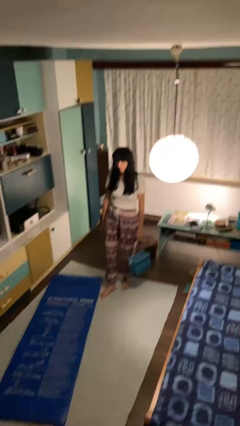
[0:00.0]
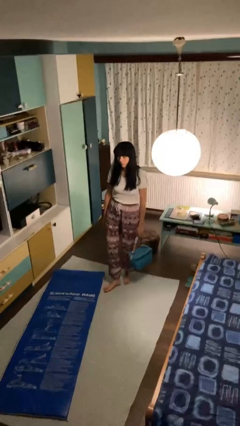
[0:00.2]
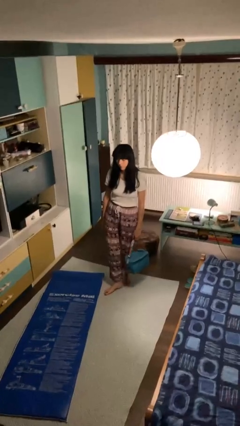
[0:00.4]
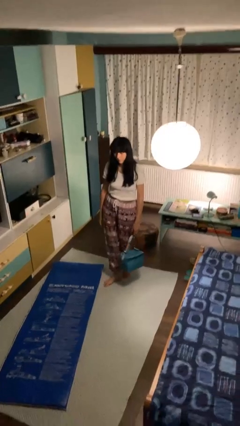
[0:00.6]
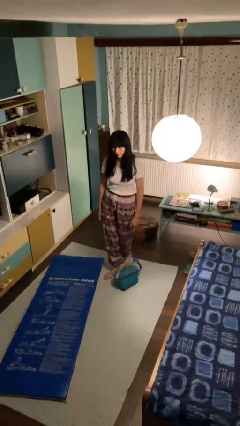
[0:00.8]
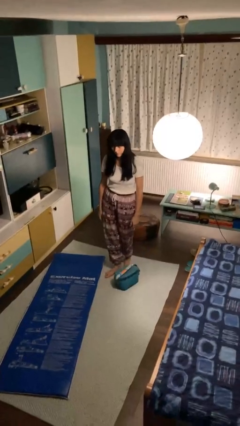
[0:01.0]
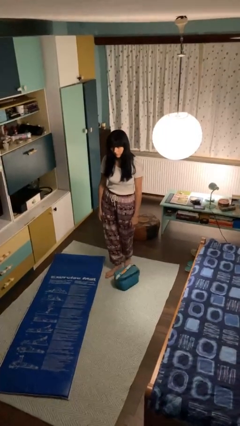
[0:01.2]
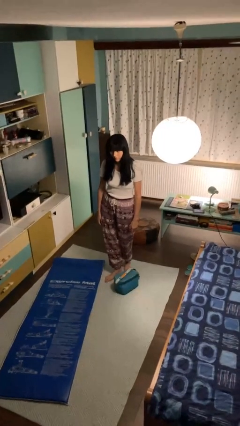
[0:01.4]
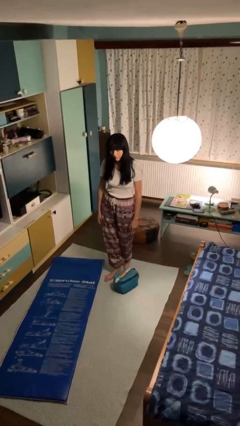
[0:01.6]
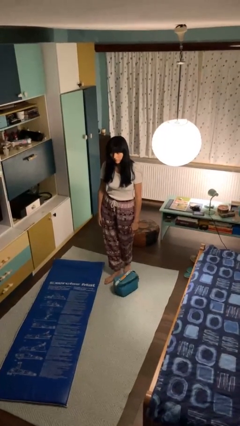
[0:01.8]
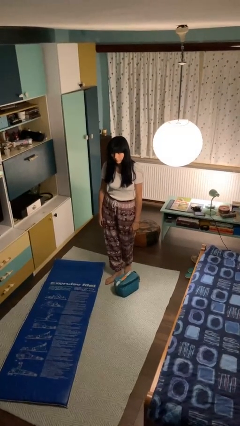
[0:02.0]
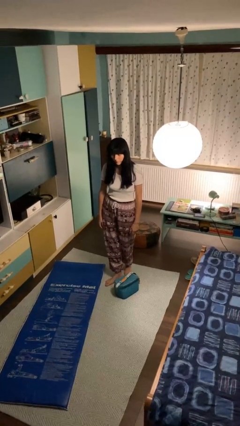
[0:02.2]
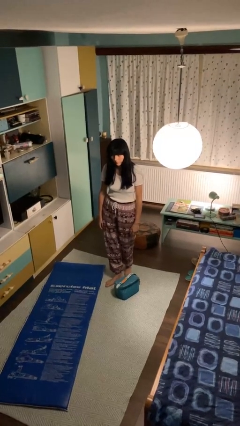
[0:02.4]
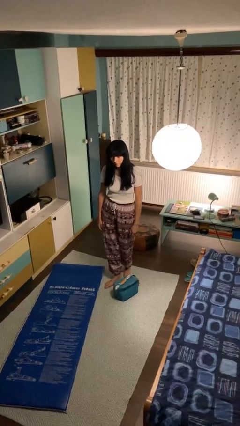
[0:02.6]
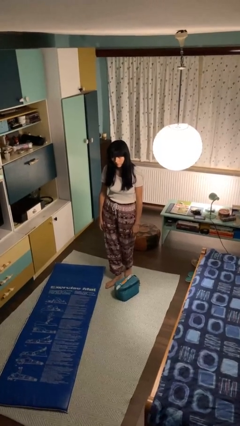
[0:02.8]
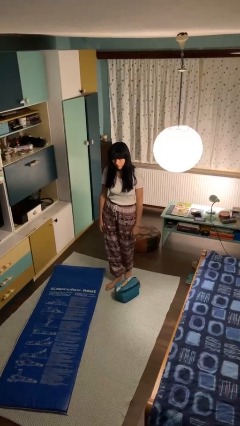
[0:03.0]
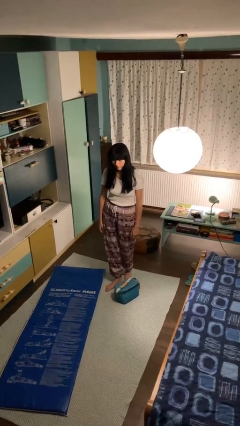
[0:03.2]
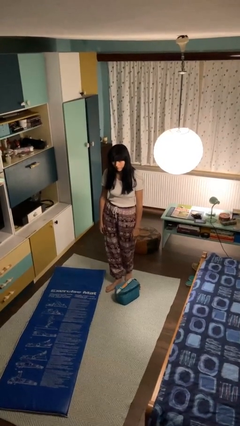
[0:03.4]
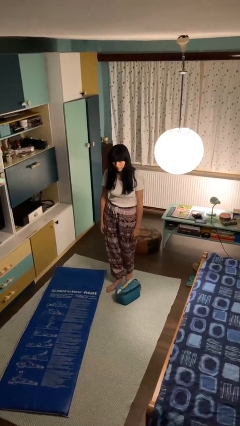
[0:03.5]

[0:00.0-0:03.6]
person drops object

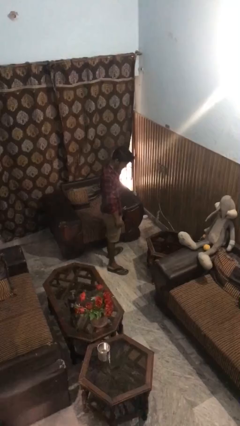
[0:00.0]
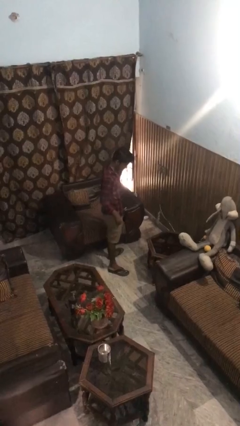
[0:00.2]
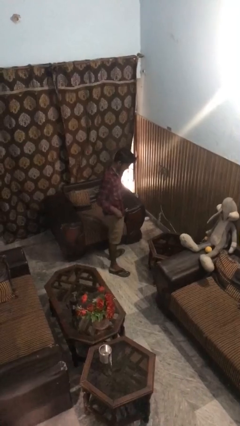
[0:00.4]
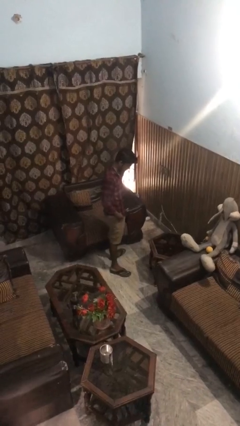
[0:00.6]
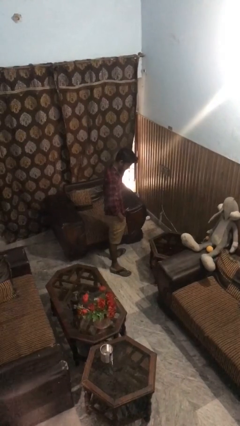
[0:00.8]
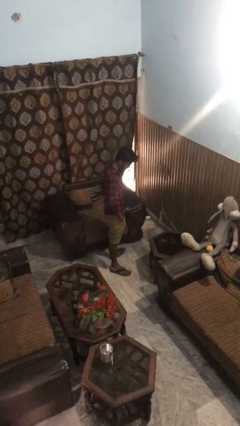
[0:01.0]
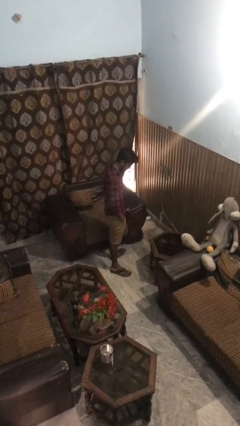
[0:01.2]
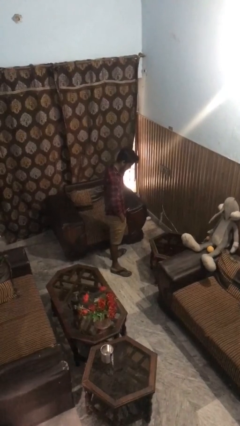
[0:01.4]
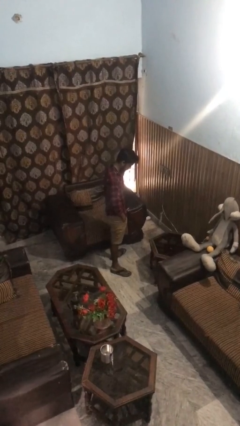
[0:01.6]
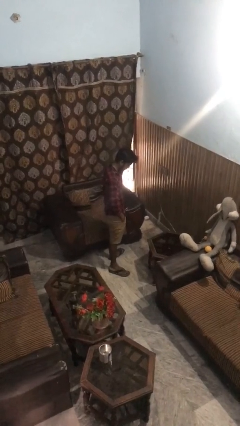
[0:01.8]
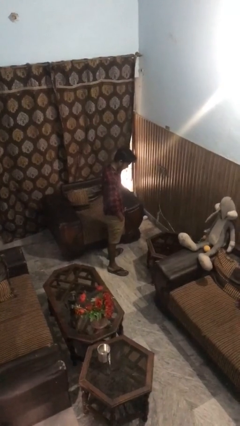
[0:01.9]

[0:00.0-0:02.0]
person puts hands in back pockets

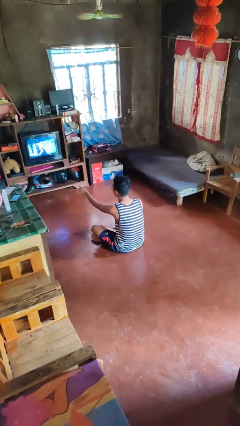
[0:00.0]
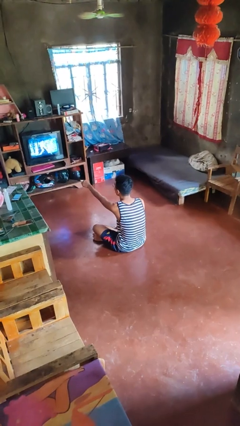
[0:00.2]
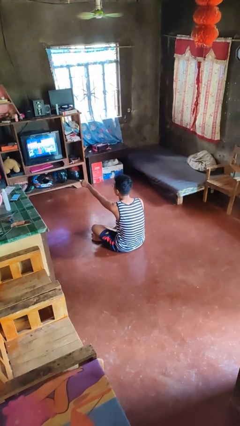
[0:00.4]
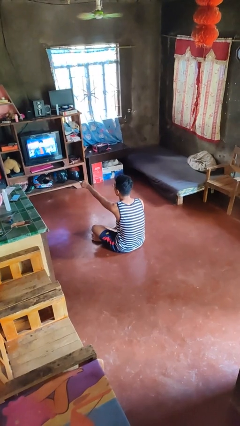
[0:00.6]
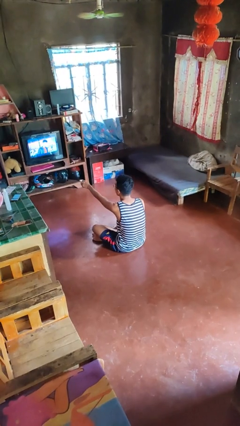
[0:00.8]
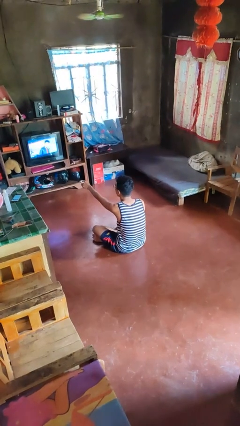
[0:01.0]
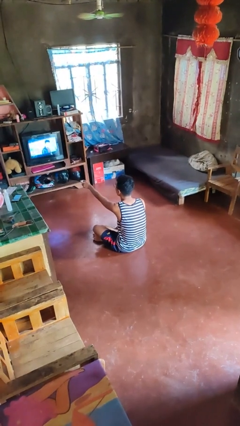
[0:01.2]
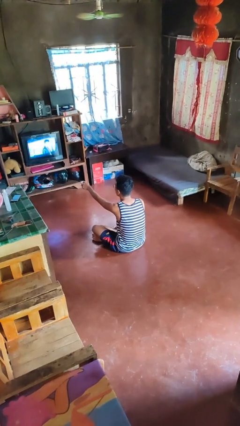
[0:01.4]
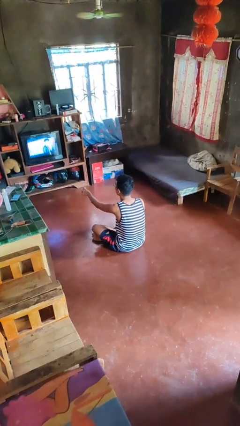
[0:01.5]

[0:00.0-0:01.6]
person uses television remote

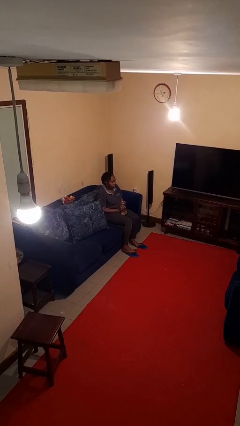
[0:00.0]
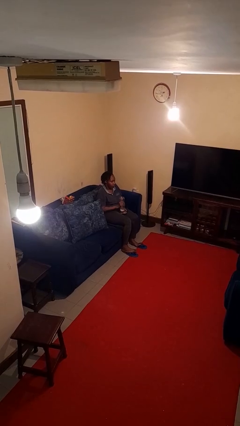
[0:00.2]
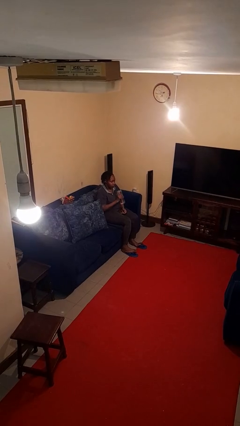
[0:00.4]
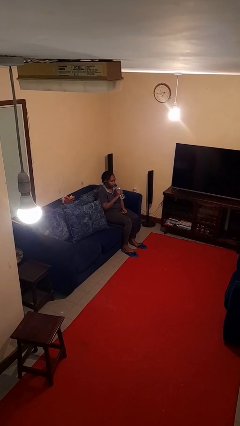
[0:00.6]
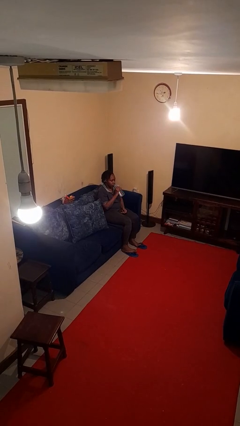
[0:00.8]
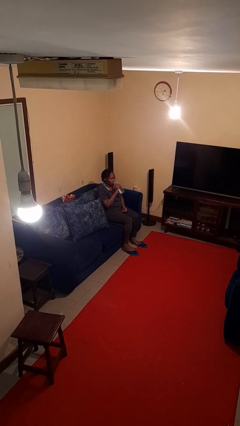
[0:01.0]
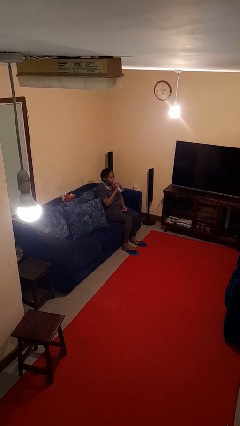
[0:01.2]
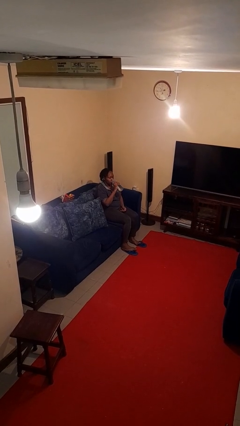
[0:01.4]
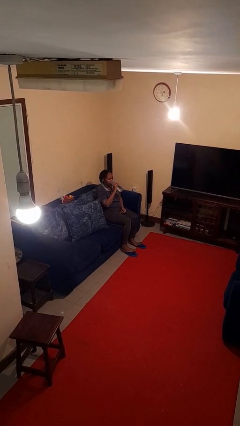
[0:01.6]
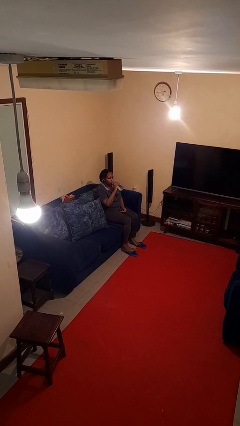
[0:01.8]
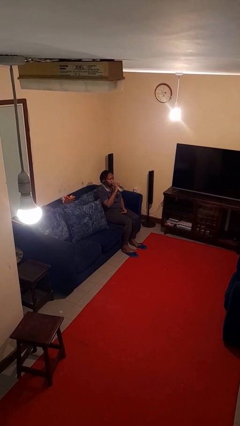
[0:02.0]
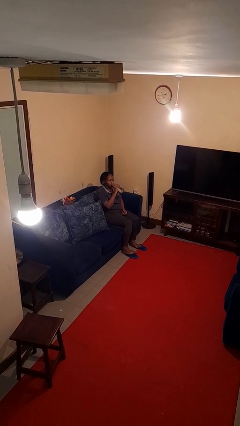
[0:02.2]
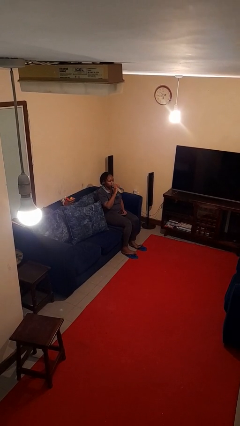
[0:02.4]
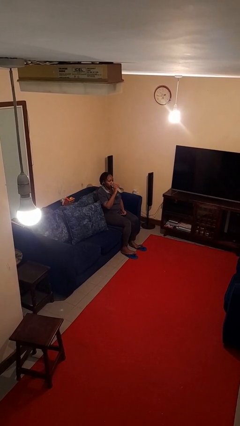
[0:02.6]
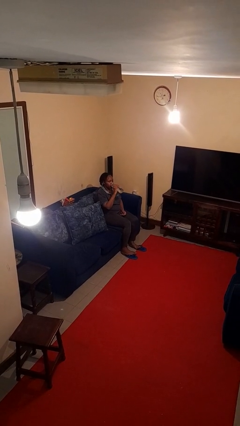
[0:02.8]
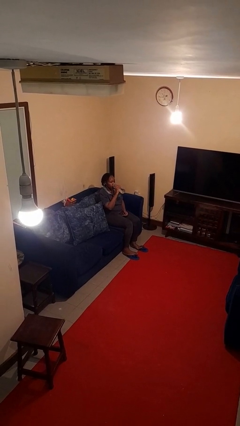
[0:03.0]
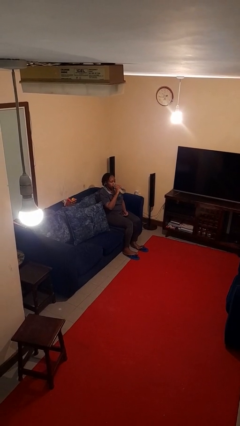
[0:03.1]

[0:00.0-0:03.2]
person drinks from bottle

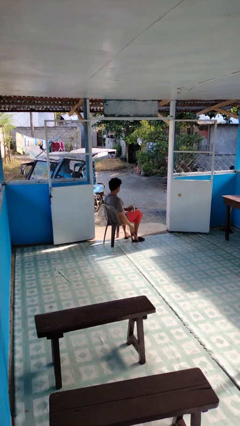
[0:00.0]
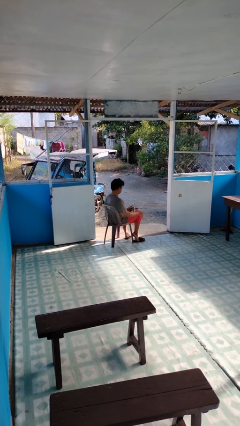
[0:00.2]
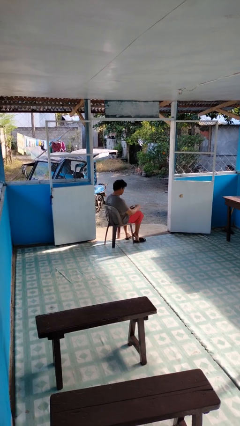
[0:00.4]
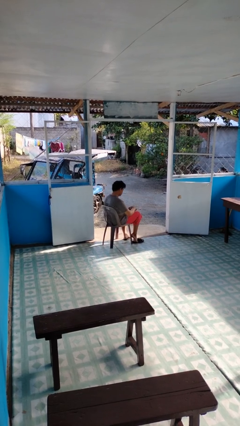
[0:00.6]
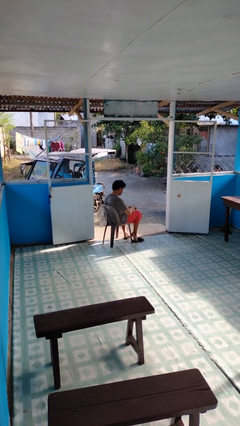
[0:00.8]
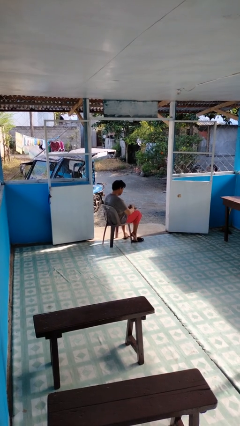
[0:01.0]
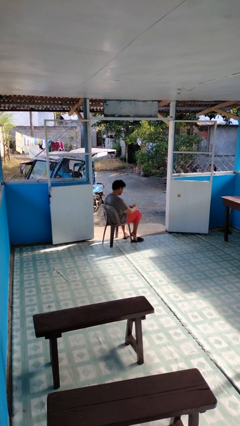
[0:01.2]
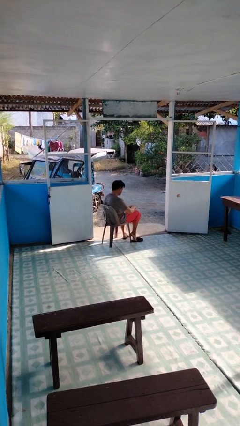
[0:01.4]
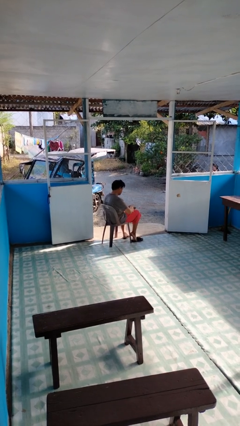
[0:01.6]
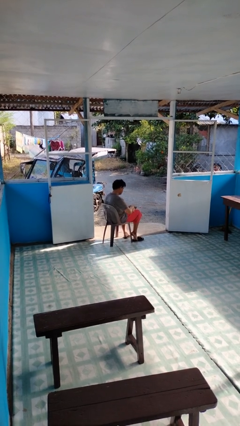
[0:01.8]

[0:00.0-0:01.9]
person pets cat

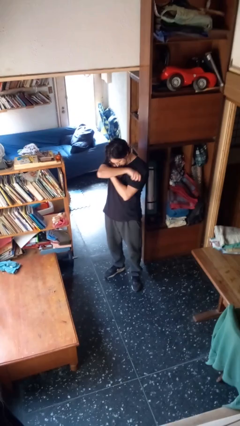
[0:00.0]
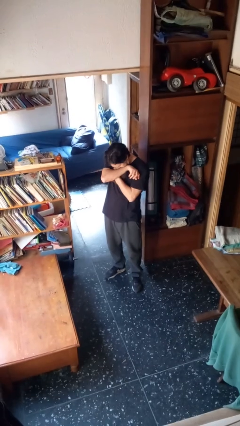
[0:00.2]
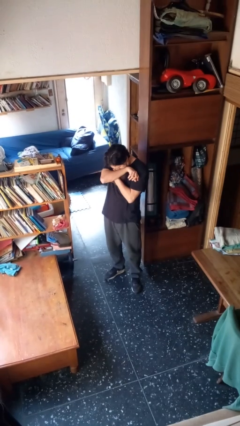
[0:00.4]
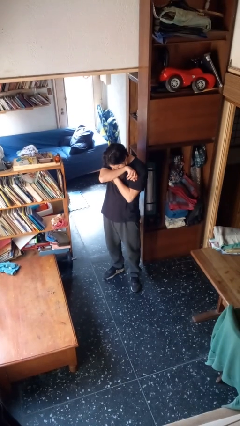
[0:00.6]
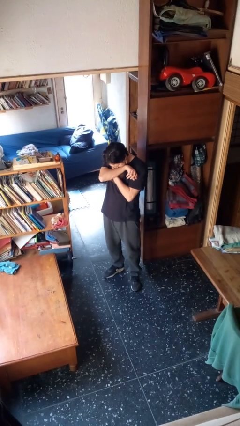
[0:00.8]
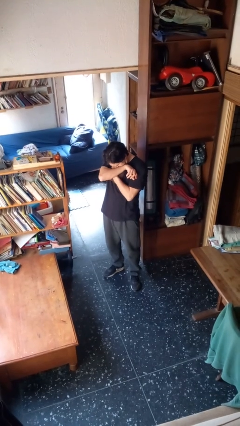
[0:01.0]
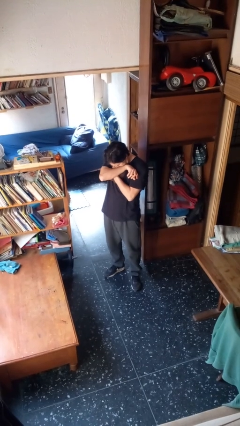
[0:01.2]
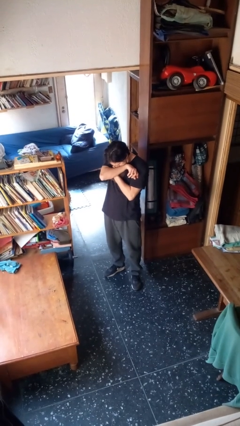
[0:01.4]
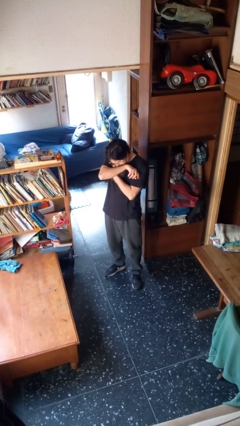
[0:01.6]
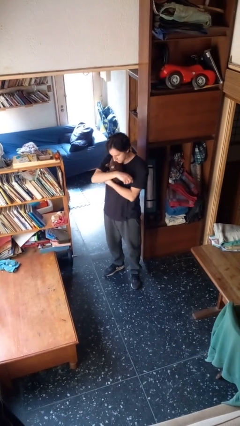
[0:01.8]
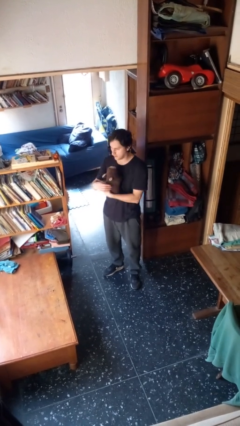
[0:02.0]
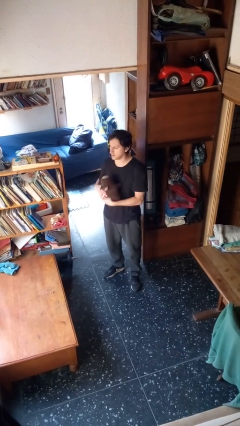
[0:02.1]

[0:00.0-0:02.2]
person hugs stuffed animal

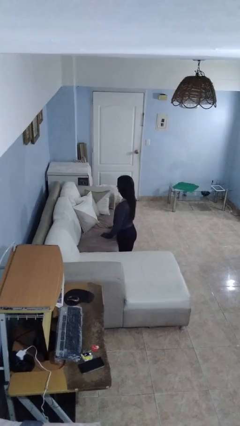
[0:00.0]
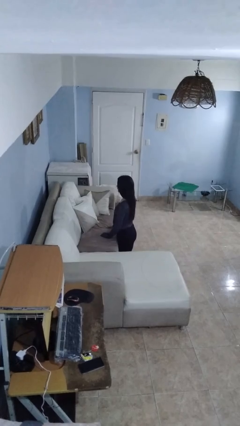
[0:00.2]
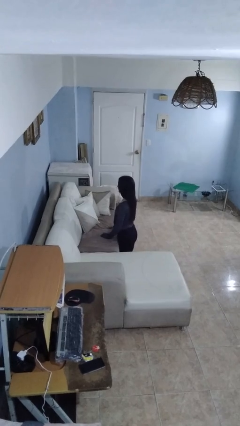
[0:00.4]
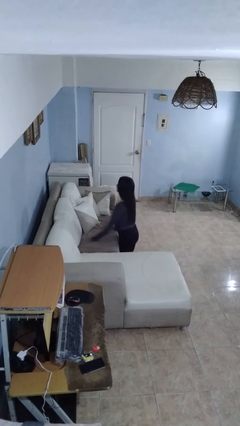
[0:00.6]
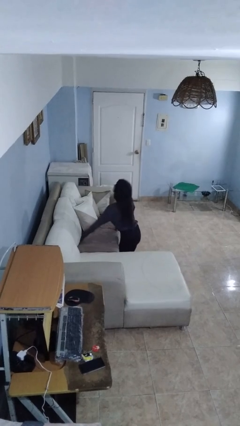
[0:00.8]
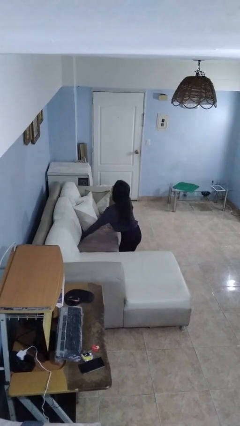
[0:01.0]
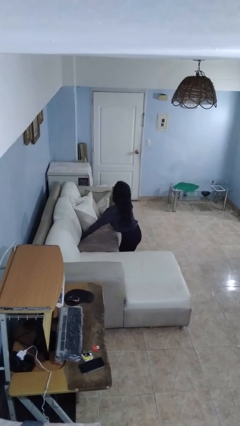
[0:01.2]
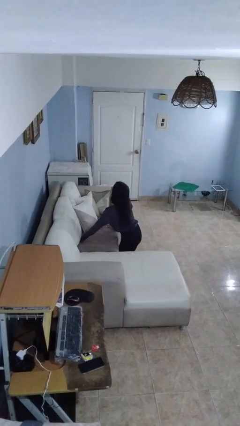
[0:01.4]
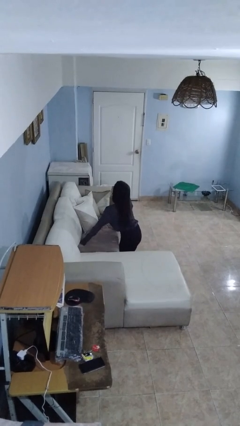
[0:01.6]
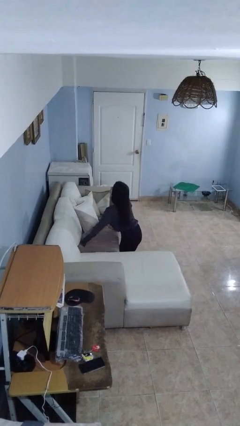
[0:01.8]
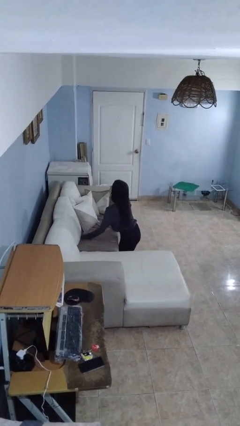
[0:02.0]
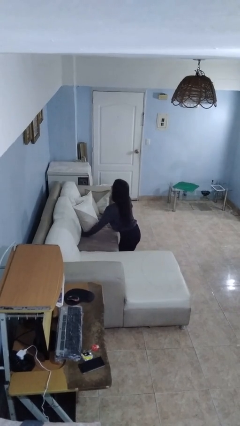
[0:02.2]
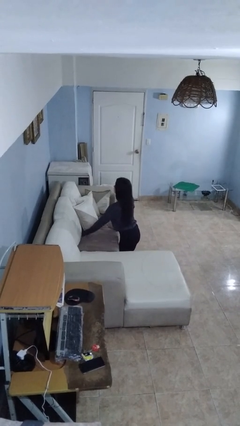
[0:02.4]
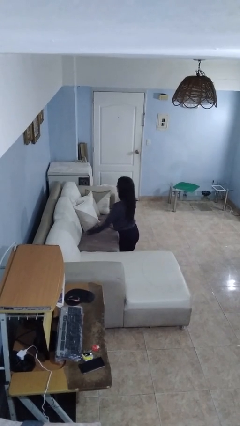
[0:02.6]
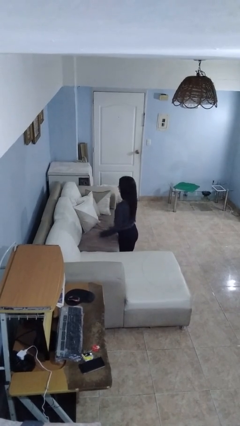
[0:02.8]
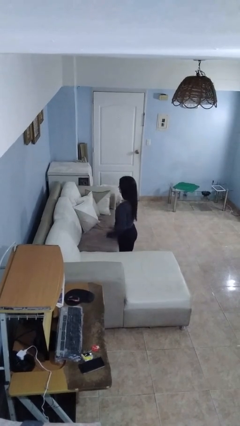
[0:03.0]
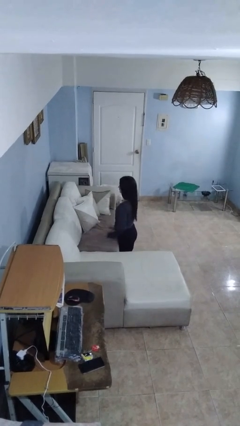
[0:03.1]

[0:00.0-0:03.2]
person searches in couch
